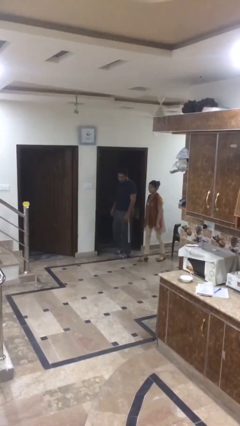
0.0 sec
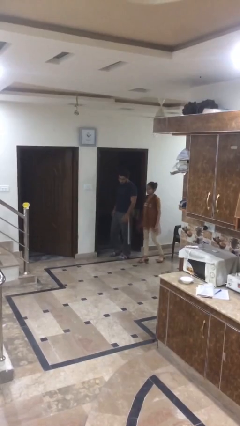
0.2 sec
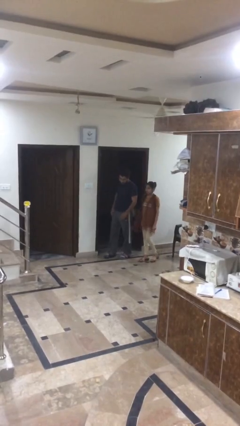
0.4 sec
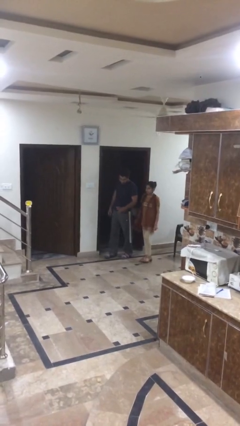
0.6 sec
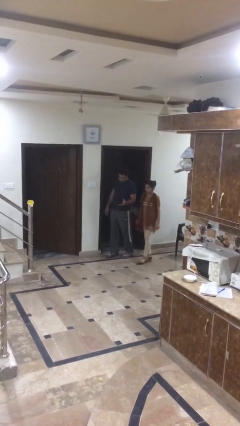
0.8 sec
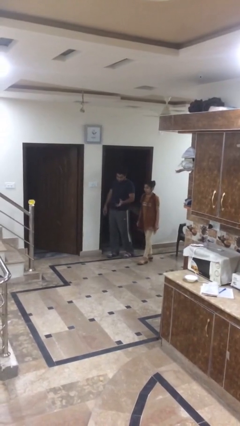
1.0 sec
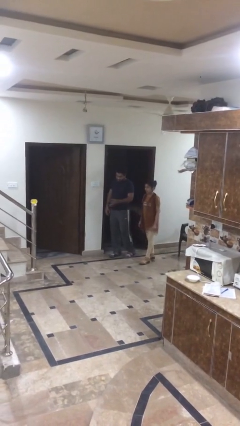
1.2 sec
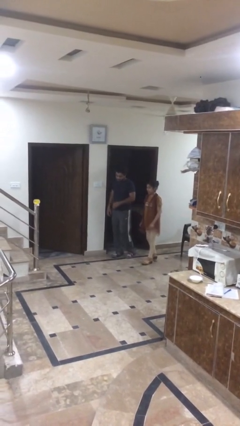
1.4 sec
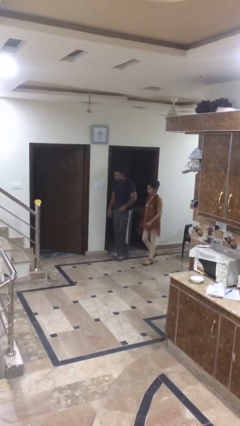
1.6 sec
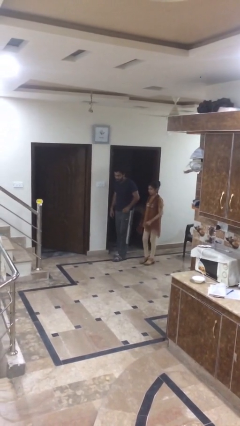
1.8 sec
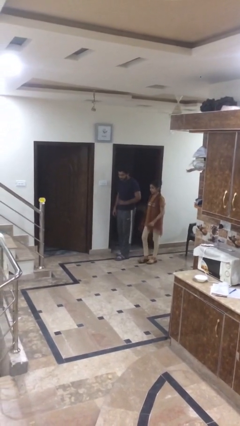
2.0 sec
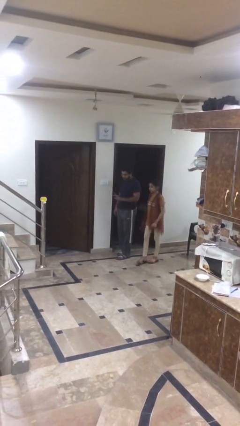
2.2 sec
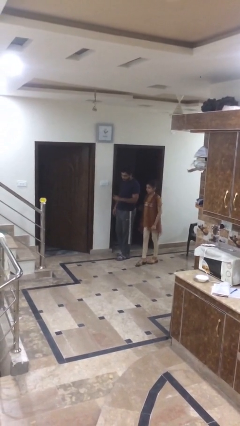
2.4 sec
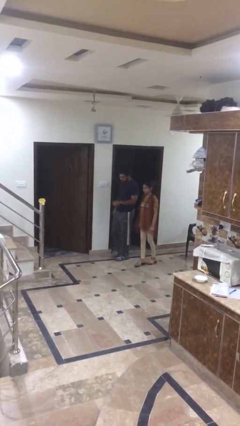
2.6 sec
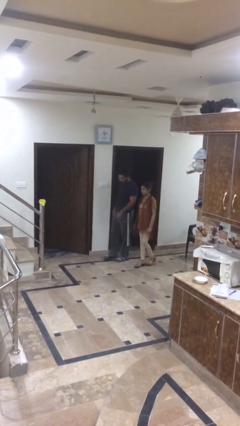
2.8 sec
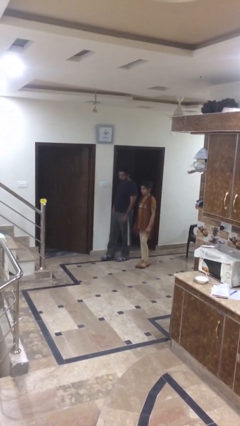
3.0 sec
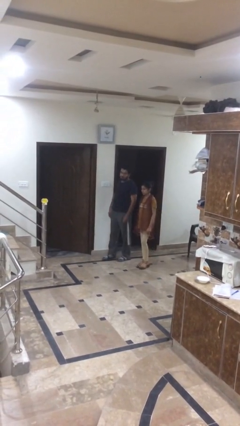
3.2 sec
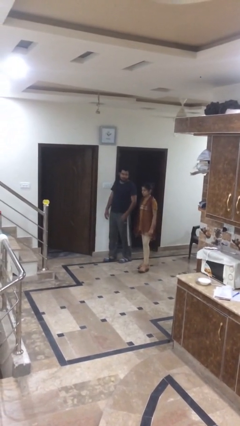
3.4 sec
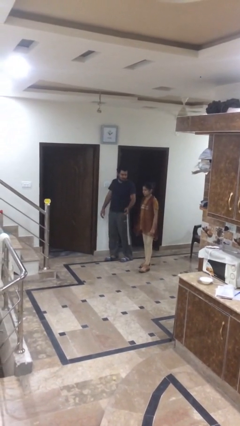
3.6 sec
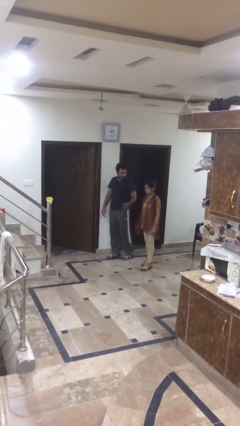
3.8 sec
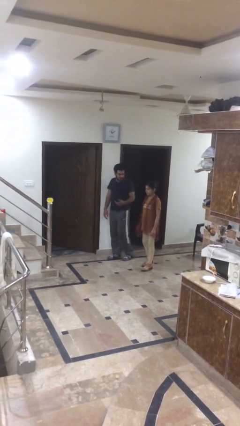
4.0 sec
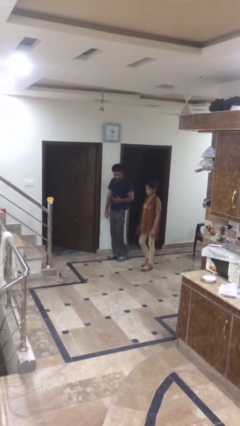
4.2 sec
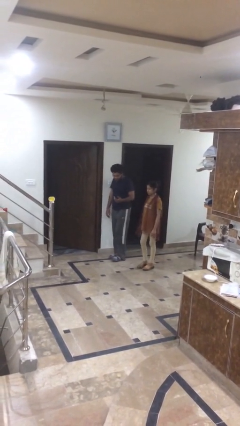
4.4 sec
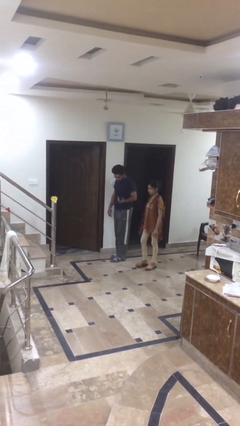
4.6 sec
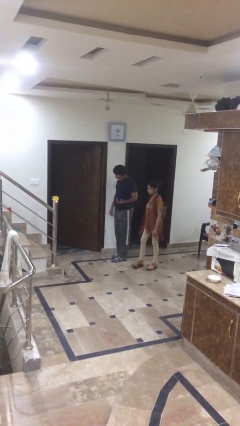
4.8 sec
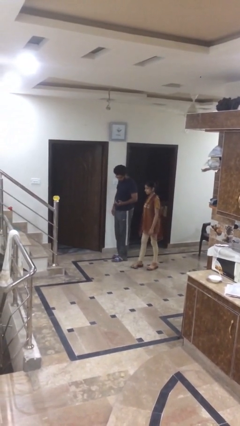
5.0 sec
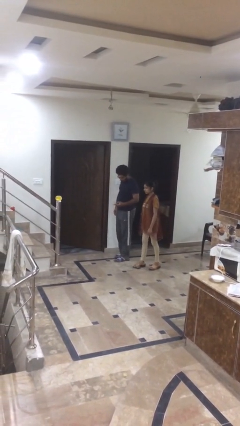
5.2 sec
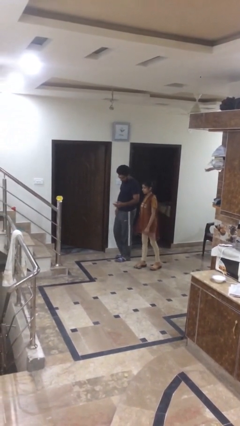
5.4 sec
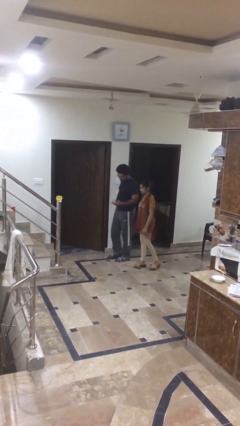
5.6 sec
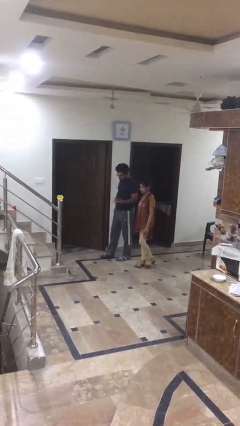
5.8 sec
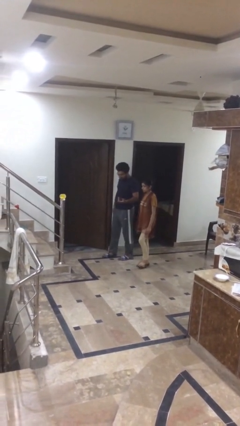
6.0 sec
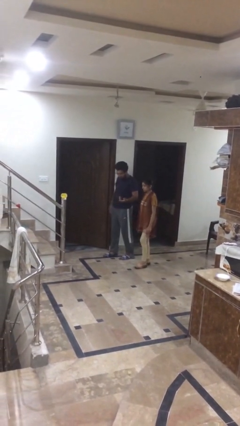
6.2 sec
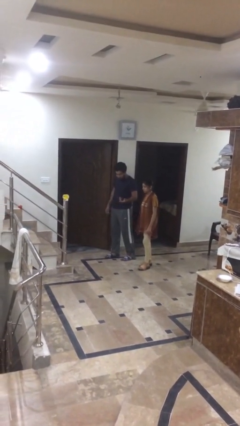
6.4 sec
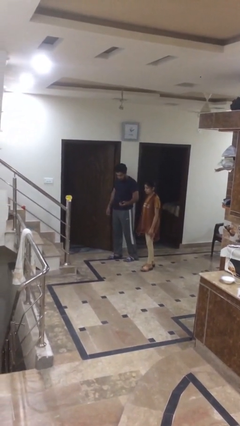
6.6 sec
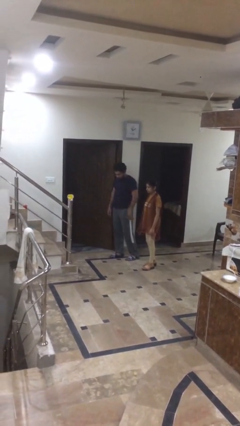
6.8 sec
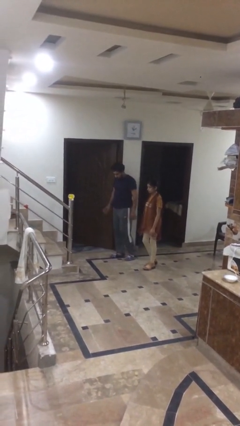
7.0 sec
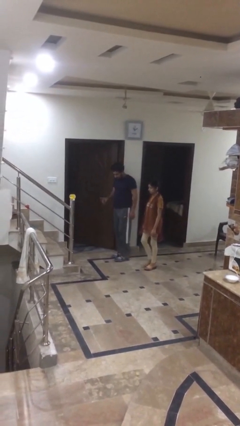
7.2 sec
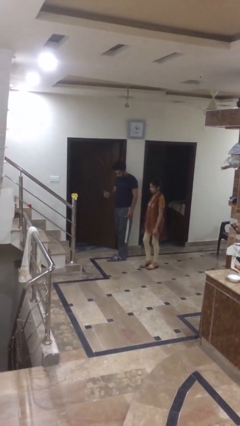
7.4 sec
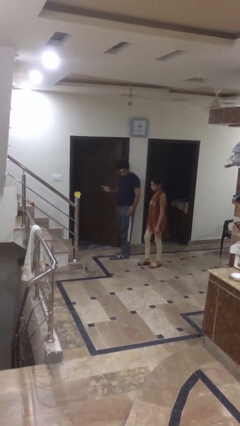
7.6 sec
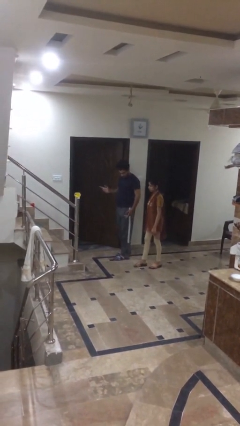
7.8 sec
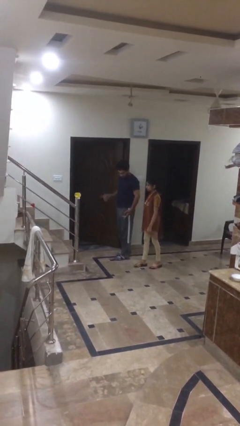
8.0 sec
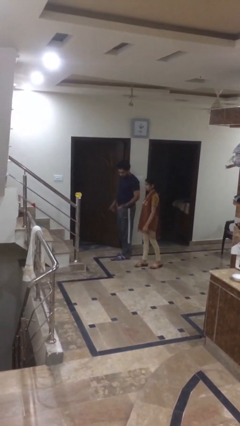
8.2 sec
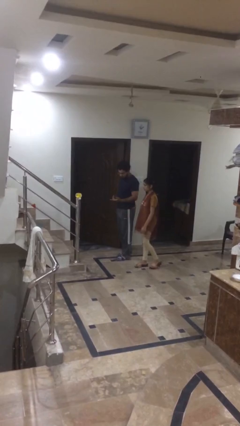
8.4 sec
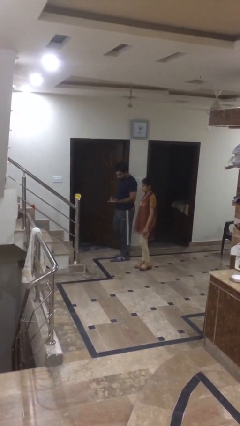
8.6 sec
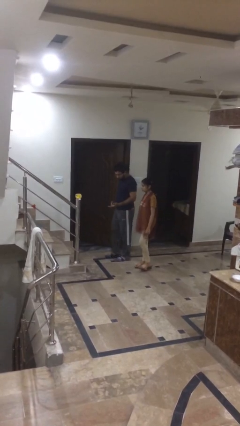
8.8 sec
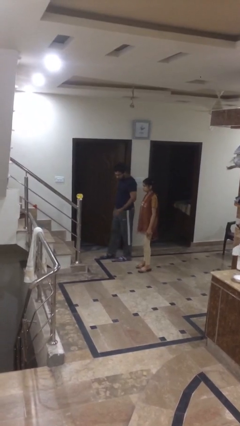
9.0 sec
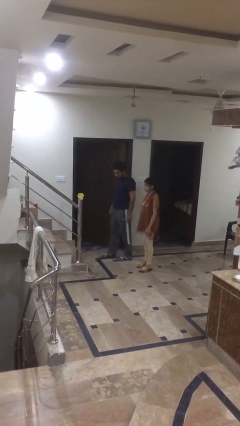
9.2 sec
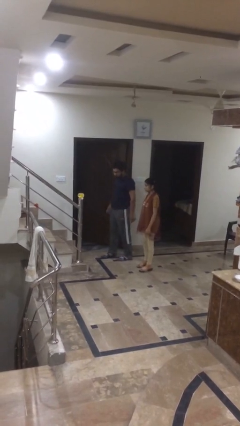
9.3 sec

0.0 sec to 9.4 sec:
person talks to person

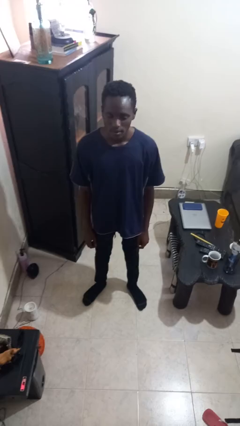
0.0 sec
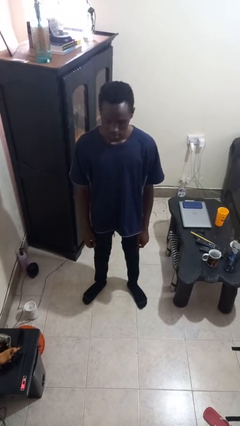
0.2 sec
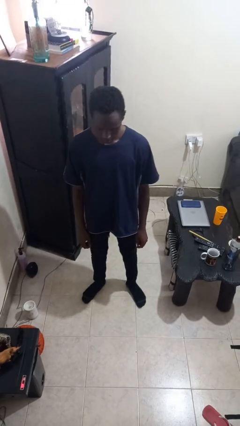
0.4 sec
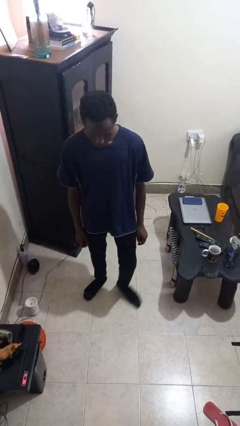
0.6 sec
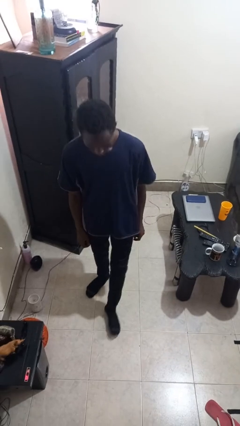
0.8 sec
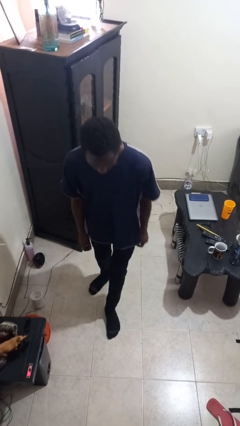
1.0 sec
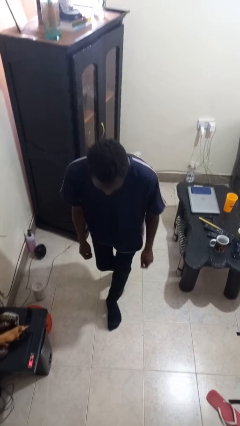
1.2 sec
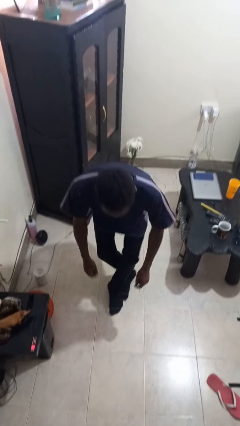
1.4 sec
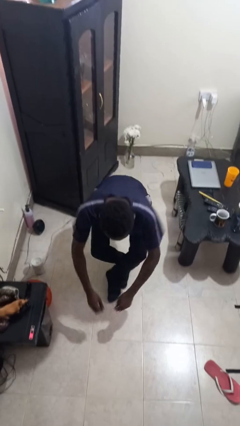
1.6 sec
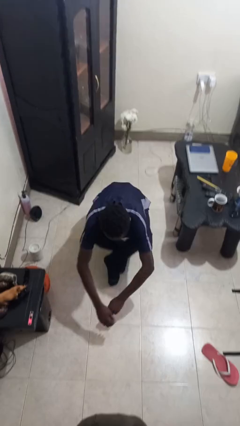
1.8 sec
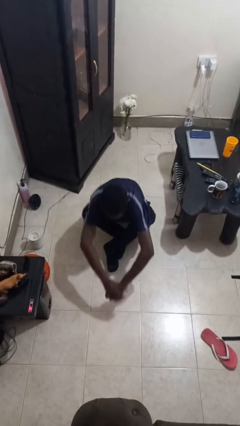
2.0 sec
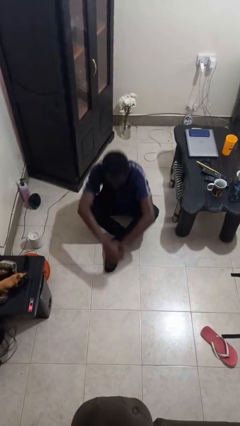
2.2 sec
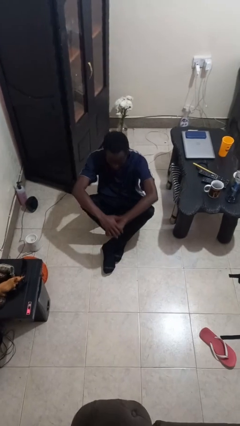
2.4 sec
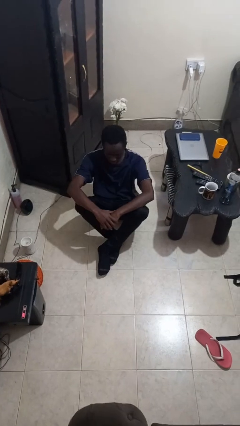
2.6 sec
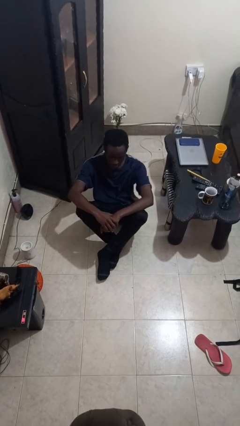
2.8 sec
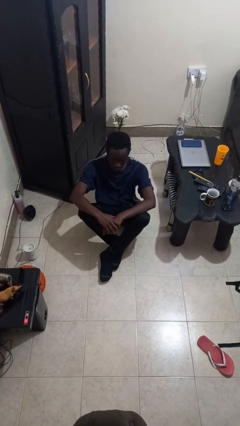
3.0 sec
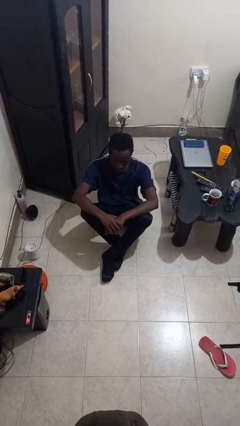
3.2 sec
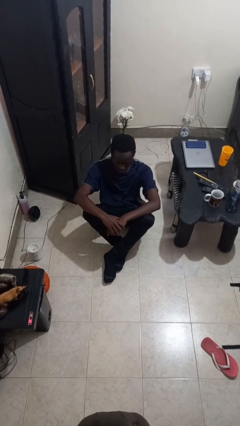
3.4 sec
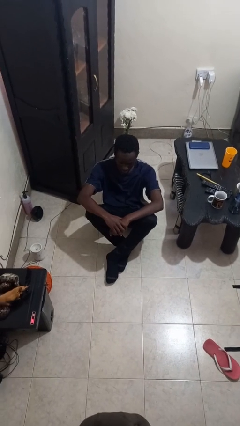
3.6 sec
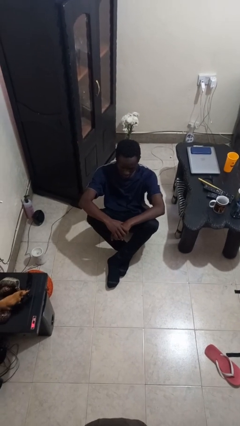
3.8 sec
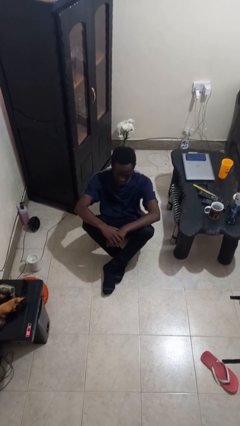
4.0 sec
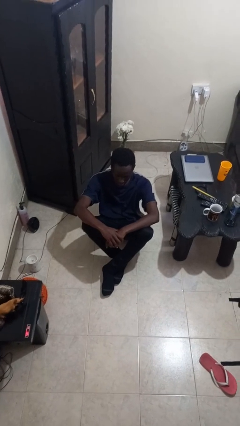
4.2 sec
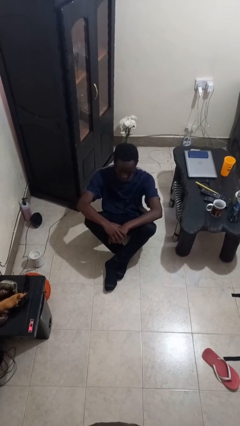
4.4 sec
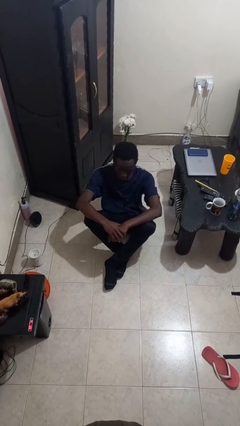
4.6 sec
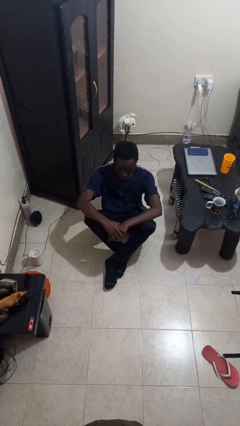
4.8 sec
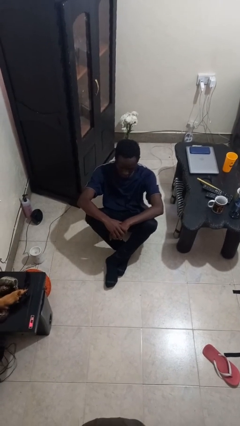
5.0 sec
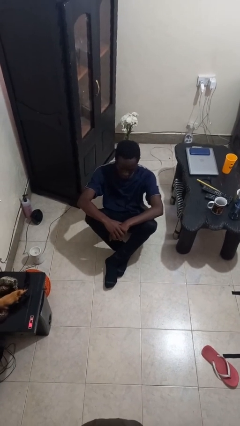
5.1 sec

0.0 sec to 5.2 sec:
person sits crisscross

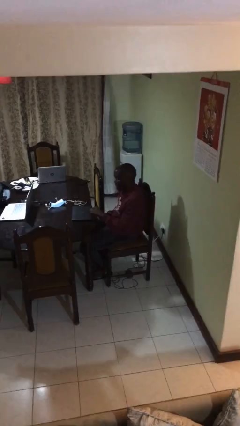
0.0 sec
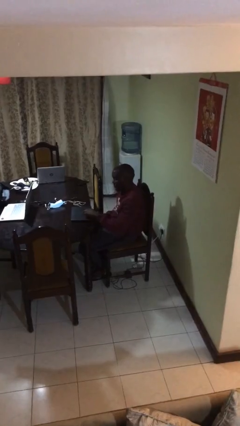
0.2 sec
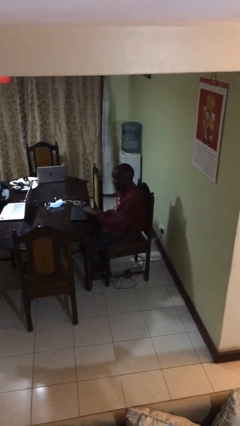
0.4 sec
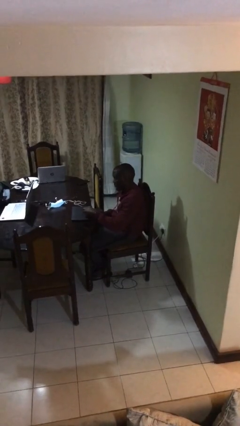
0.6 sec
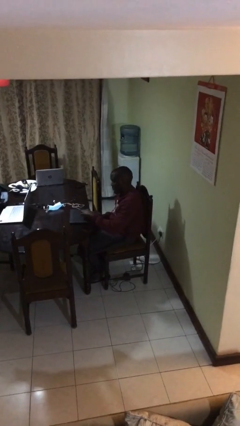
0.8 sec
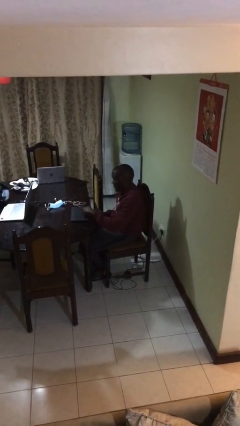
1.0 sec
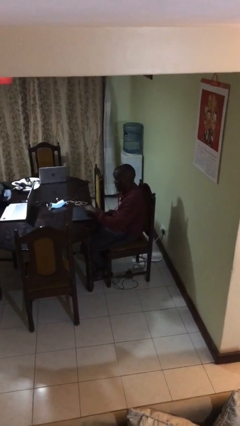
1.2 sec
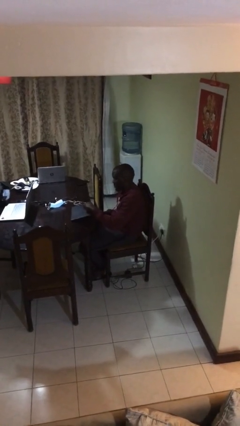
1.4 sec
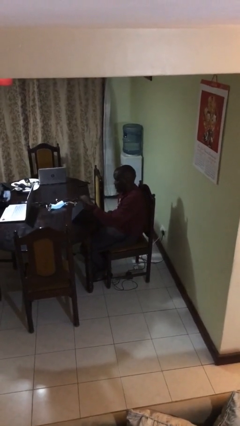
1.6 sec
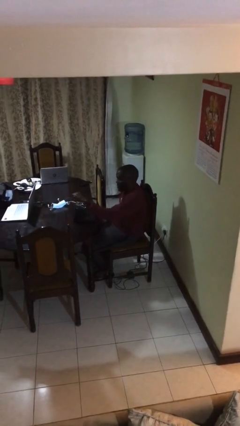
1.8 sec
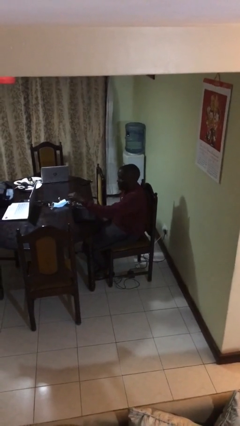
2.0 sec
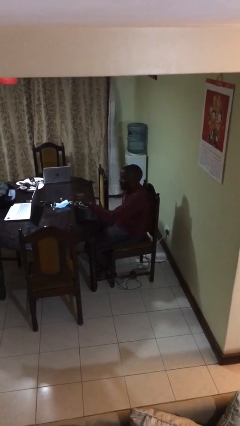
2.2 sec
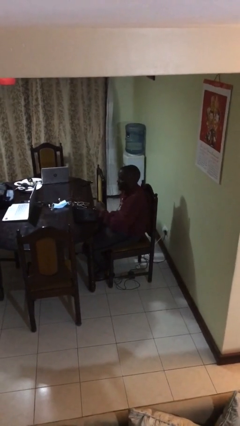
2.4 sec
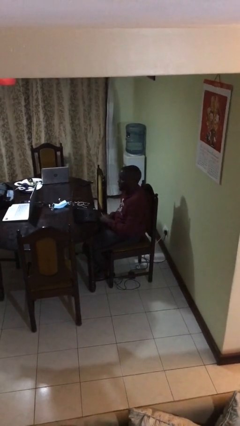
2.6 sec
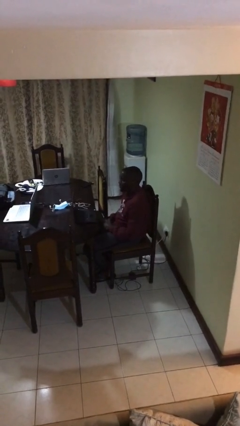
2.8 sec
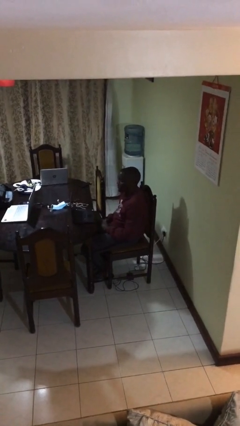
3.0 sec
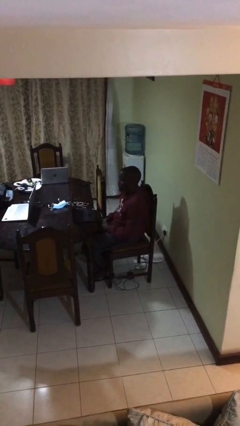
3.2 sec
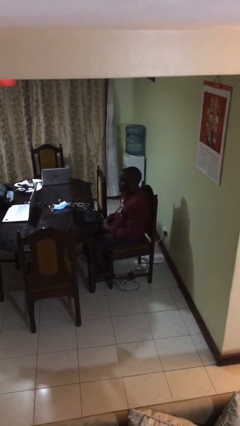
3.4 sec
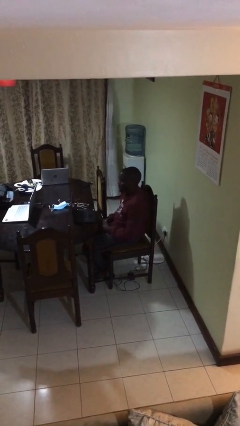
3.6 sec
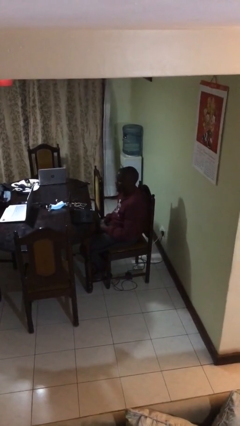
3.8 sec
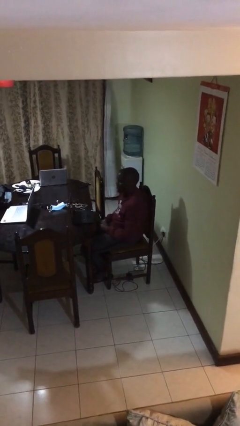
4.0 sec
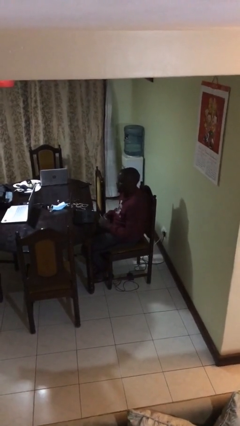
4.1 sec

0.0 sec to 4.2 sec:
person opens laptop
